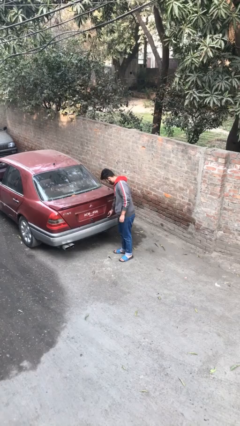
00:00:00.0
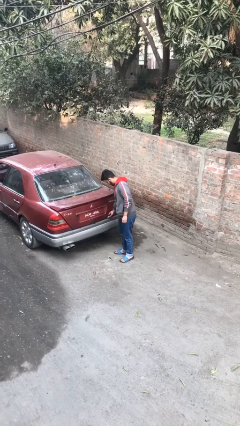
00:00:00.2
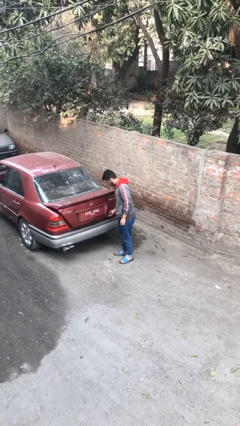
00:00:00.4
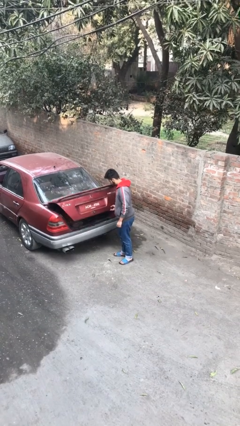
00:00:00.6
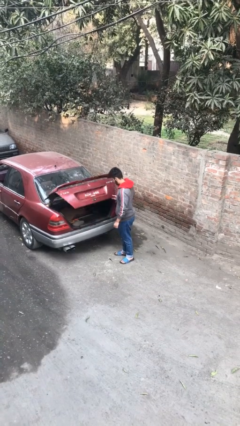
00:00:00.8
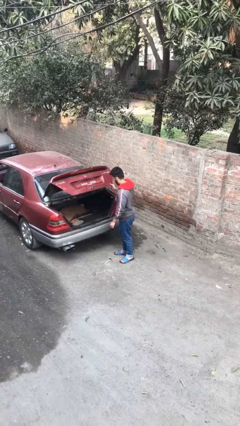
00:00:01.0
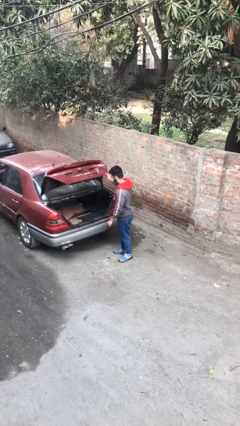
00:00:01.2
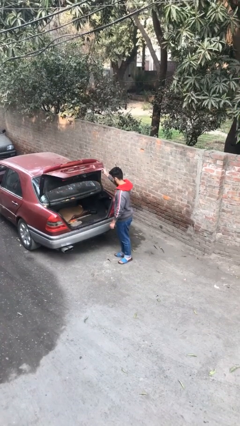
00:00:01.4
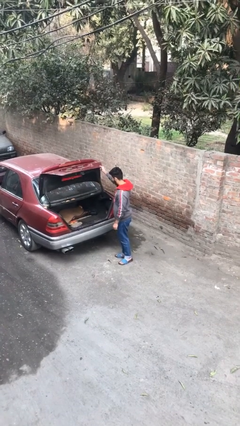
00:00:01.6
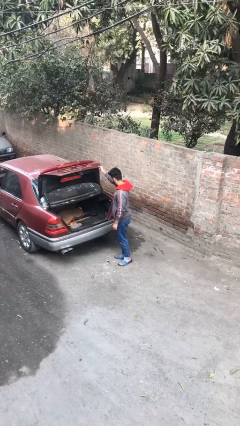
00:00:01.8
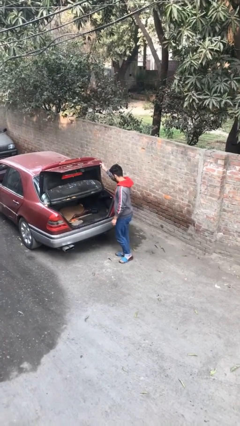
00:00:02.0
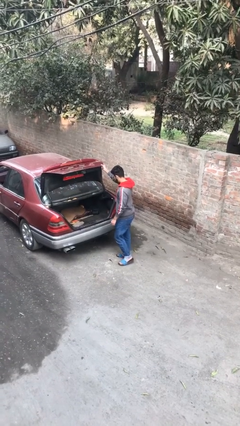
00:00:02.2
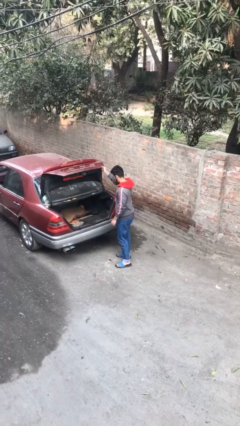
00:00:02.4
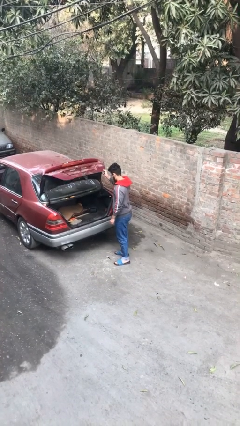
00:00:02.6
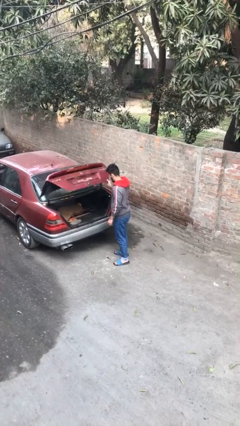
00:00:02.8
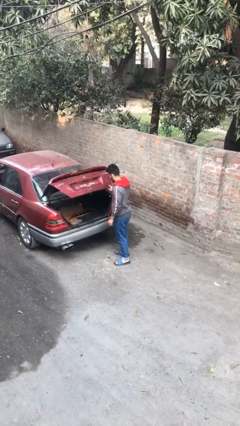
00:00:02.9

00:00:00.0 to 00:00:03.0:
person opens car trunk

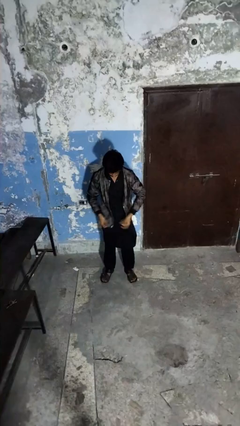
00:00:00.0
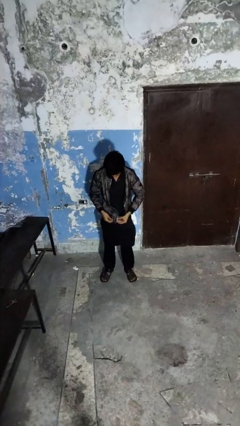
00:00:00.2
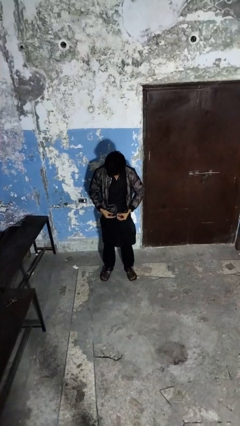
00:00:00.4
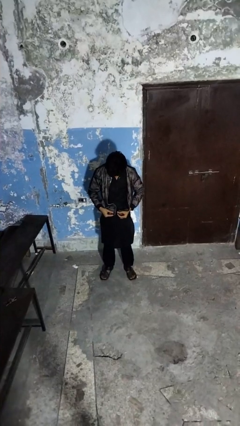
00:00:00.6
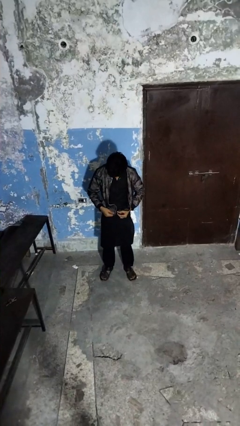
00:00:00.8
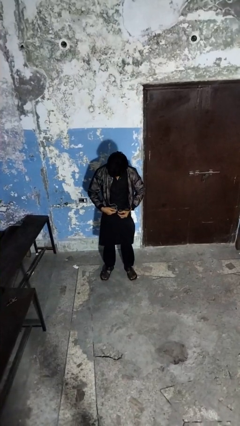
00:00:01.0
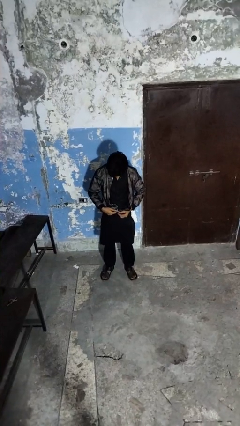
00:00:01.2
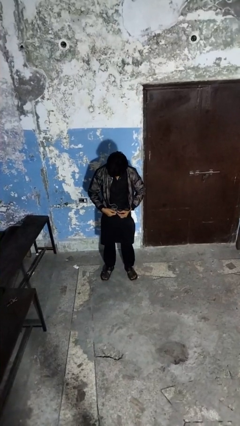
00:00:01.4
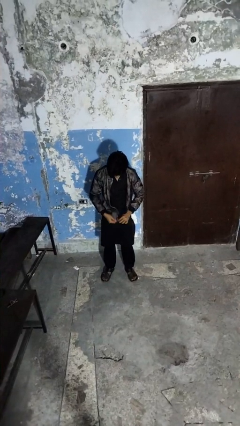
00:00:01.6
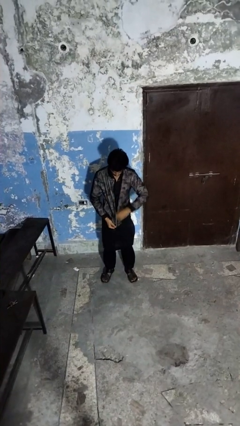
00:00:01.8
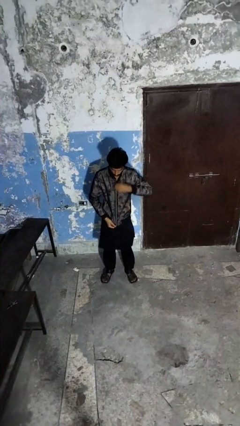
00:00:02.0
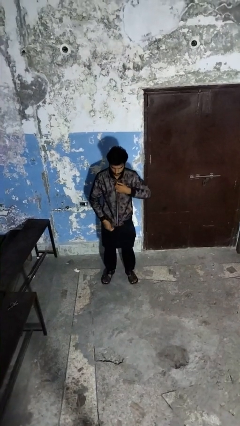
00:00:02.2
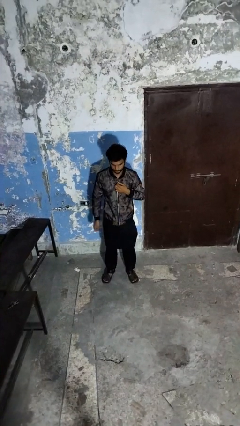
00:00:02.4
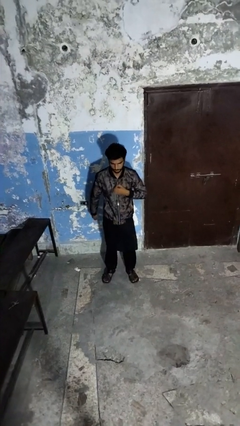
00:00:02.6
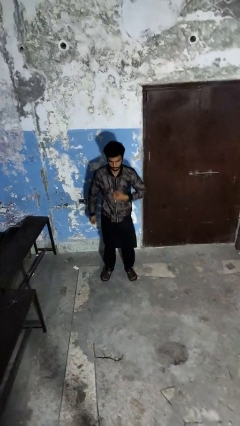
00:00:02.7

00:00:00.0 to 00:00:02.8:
person zips up jacket

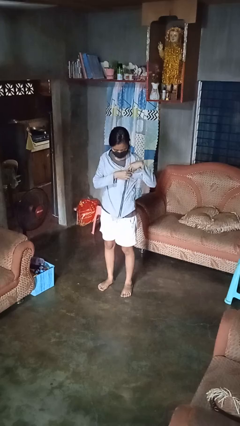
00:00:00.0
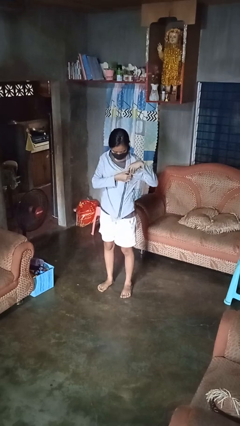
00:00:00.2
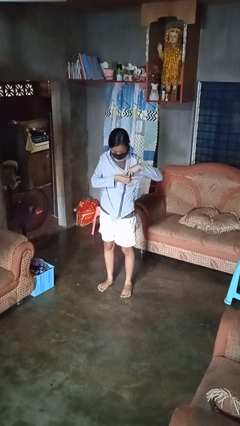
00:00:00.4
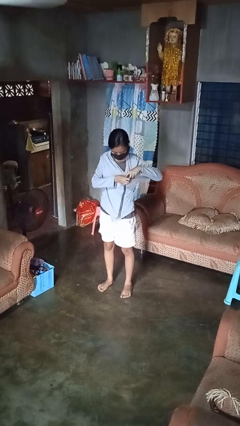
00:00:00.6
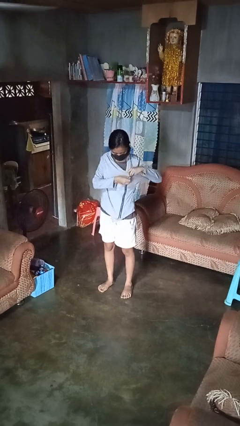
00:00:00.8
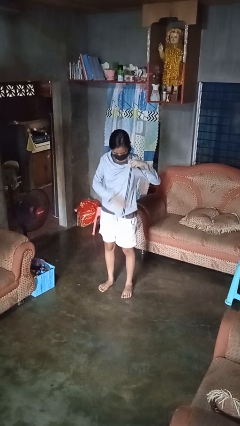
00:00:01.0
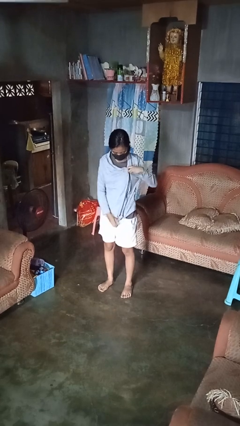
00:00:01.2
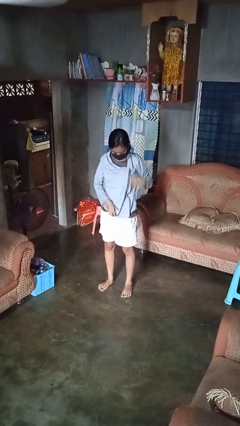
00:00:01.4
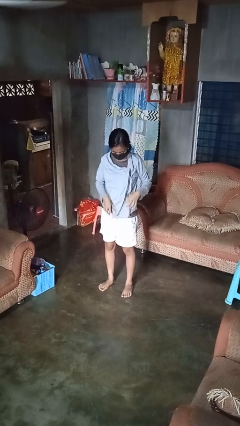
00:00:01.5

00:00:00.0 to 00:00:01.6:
person unzips jacket

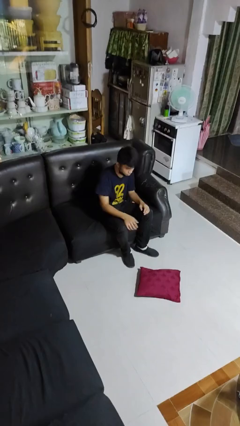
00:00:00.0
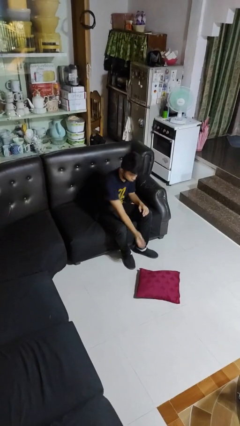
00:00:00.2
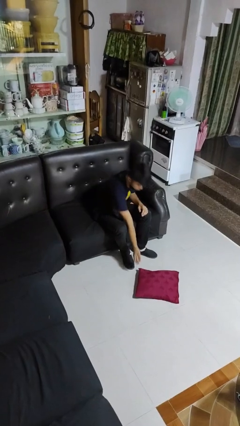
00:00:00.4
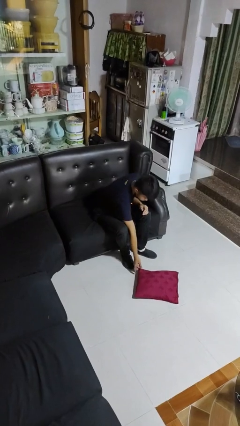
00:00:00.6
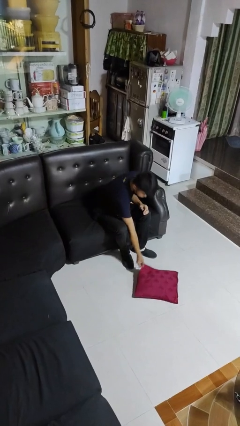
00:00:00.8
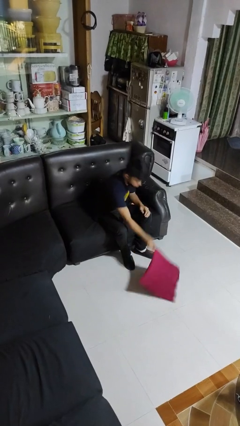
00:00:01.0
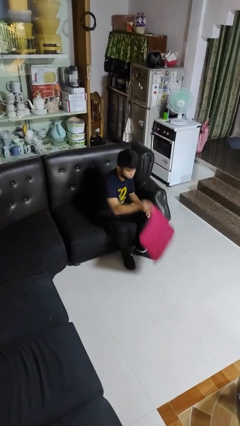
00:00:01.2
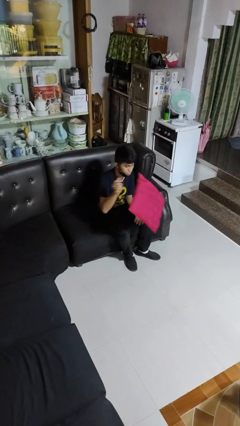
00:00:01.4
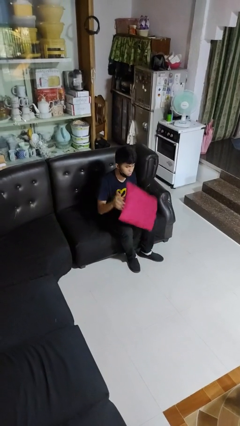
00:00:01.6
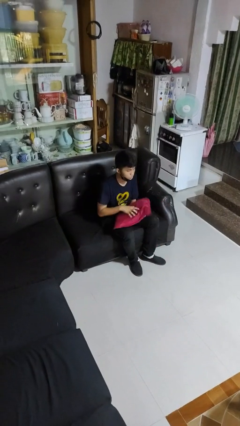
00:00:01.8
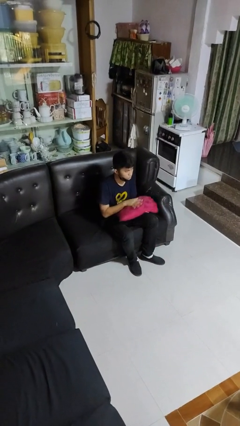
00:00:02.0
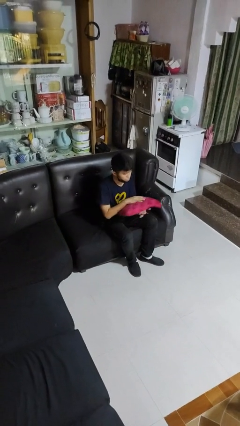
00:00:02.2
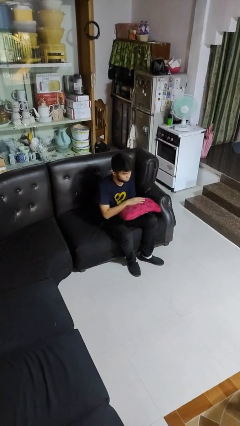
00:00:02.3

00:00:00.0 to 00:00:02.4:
person picks up object from floor

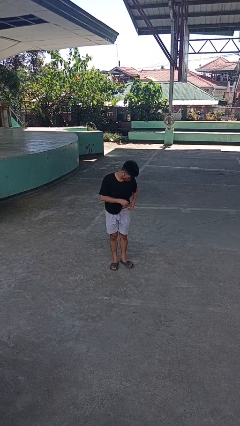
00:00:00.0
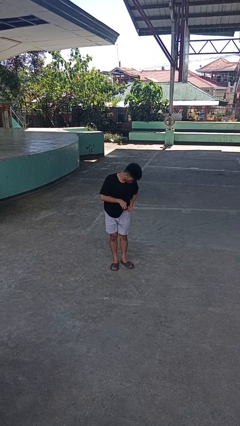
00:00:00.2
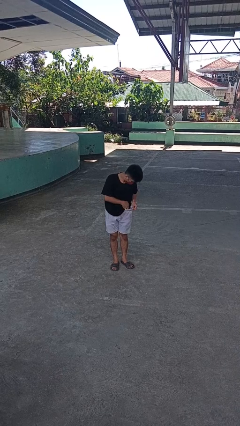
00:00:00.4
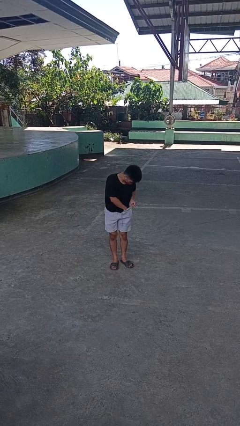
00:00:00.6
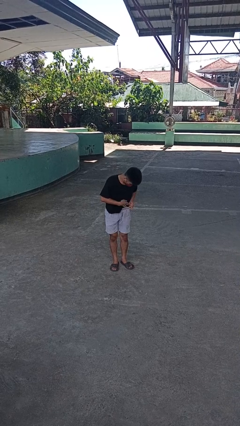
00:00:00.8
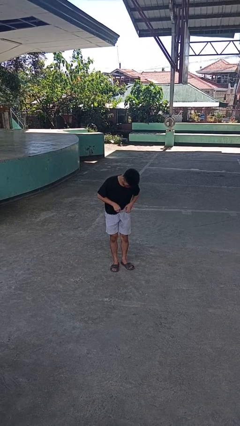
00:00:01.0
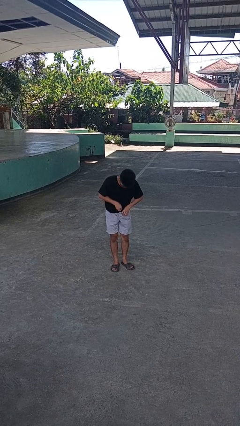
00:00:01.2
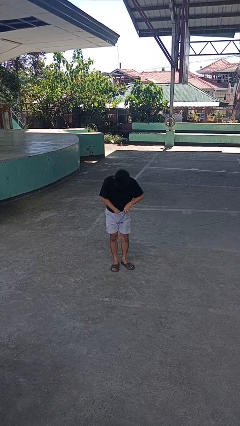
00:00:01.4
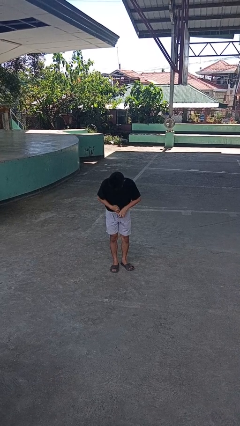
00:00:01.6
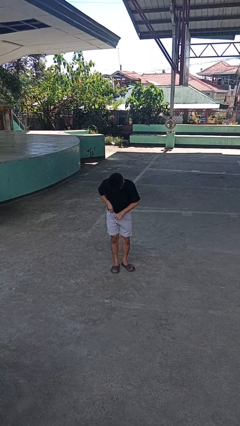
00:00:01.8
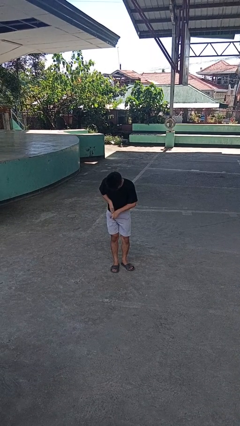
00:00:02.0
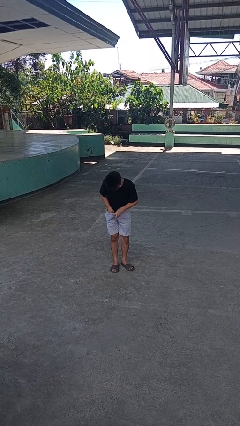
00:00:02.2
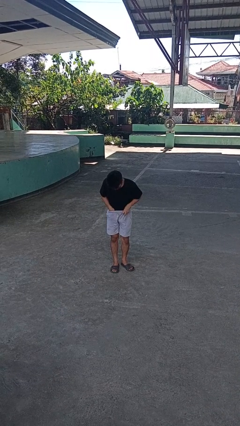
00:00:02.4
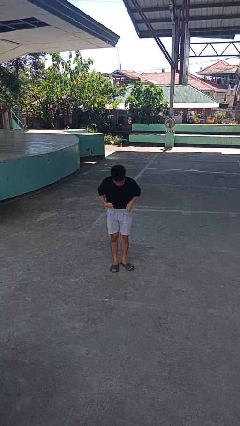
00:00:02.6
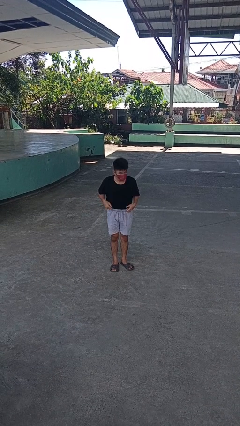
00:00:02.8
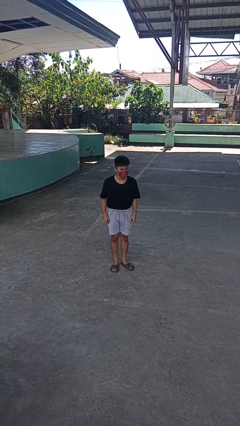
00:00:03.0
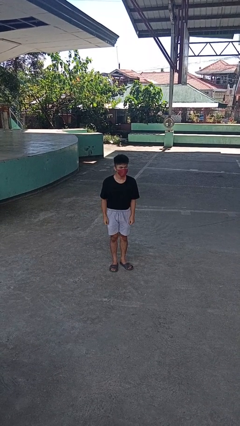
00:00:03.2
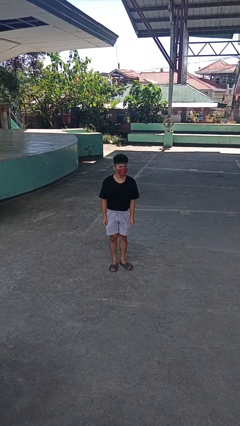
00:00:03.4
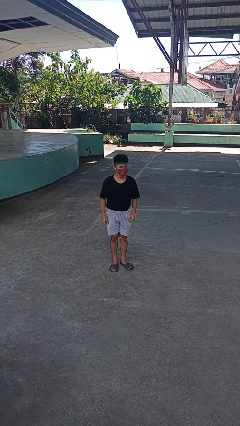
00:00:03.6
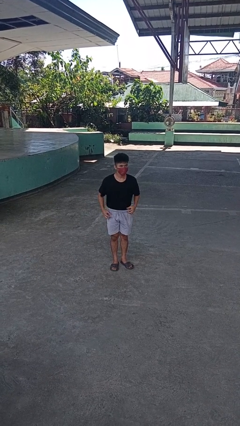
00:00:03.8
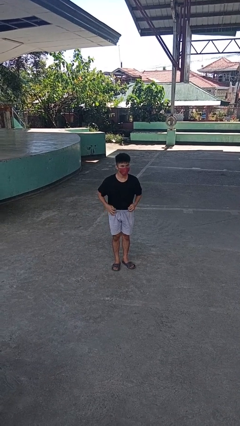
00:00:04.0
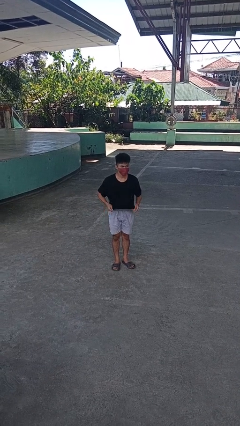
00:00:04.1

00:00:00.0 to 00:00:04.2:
person tucks in shirt

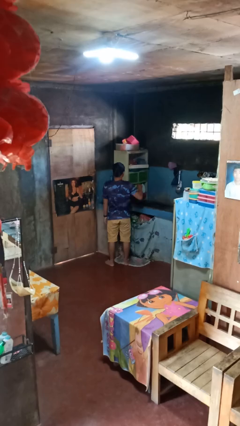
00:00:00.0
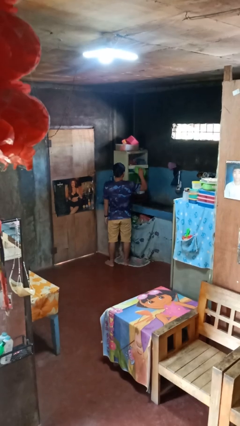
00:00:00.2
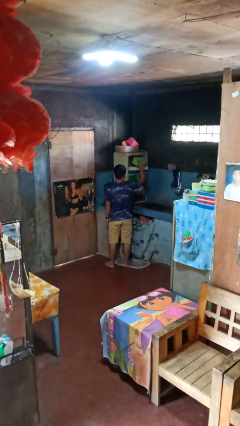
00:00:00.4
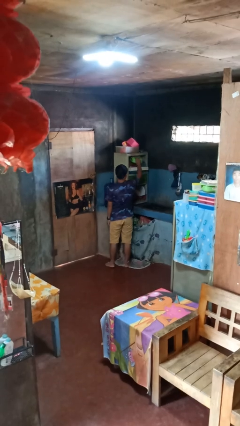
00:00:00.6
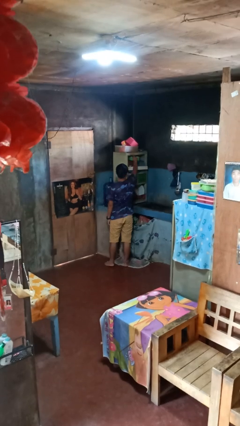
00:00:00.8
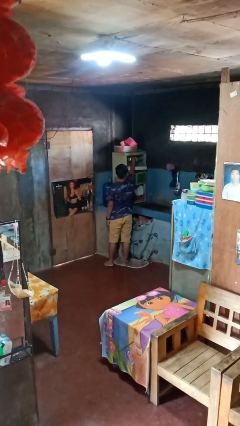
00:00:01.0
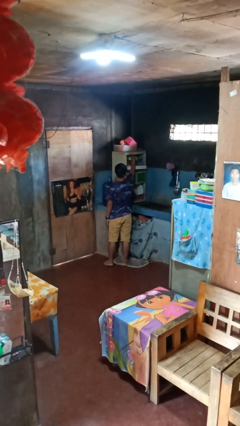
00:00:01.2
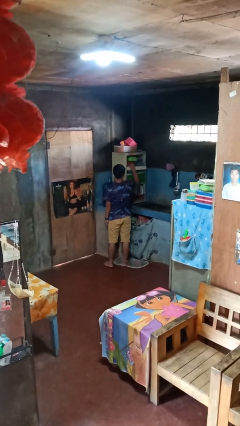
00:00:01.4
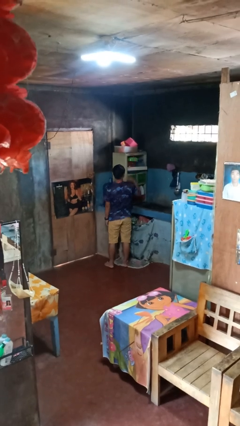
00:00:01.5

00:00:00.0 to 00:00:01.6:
person puts object in cabinet

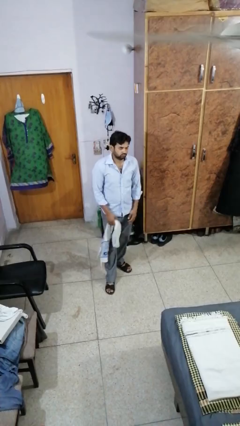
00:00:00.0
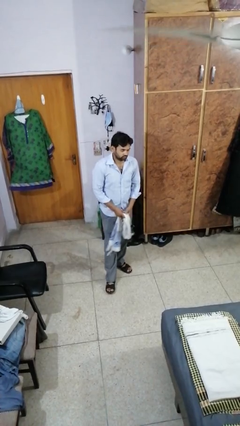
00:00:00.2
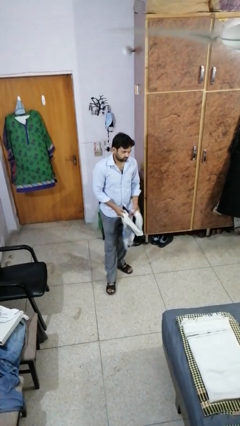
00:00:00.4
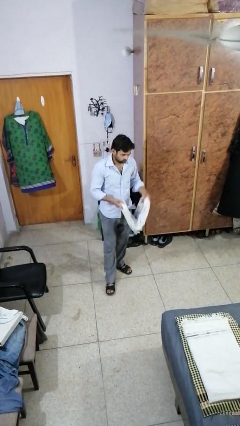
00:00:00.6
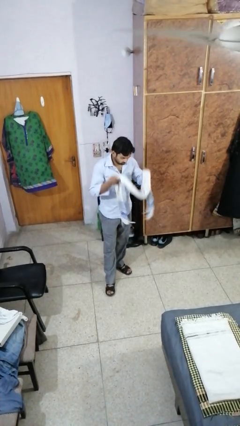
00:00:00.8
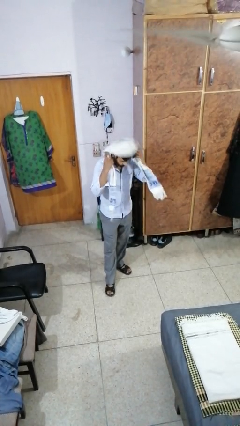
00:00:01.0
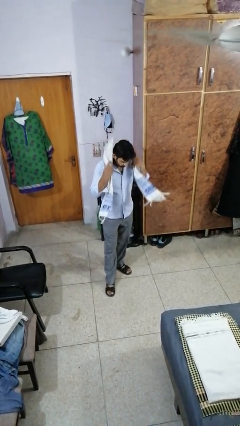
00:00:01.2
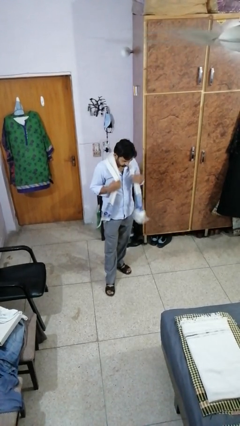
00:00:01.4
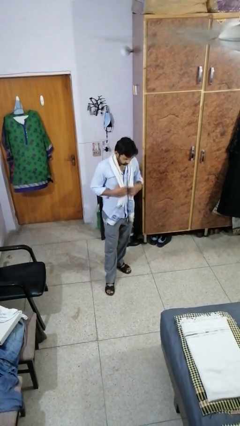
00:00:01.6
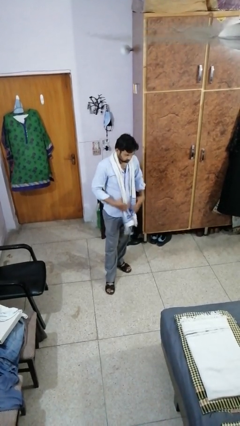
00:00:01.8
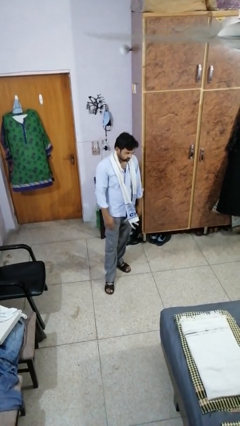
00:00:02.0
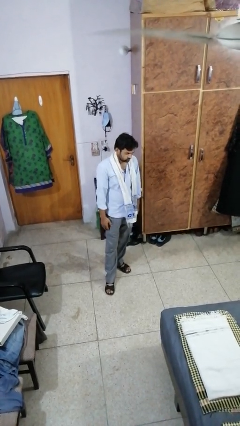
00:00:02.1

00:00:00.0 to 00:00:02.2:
person puts on scarf
